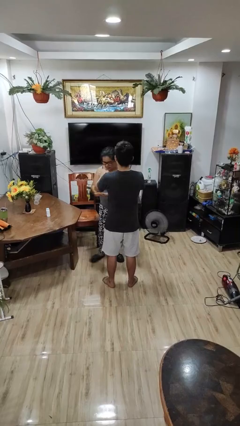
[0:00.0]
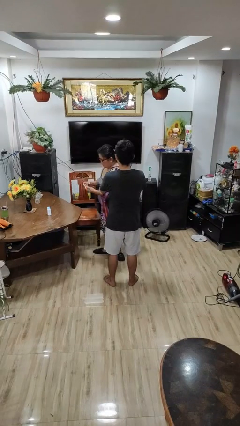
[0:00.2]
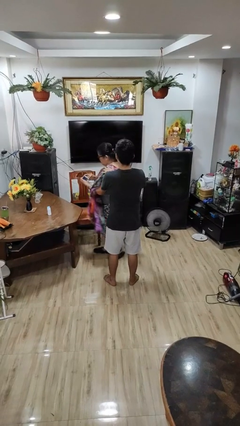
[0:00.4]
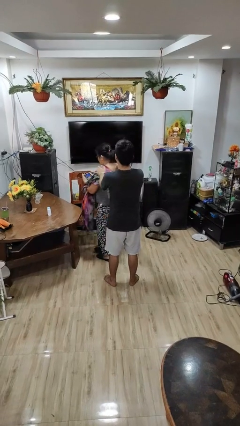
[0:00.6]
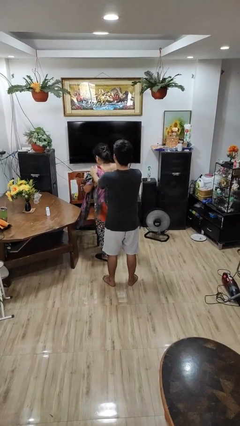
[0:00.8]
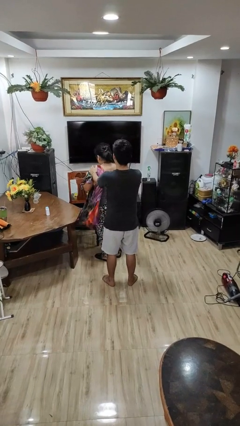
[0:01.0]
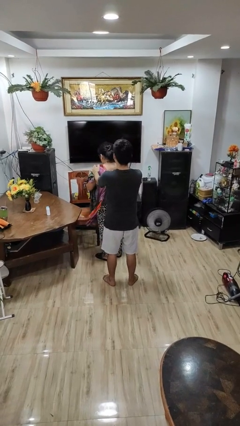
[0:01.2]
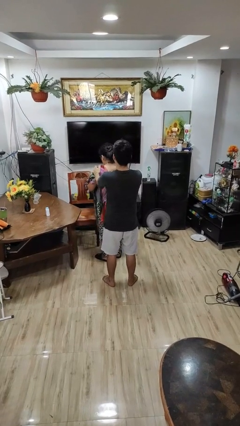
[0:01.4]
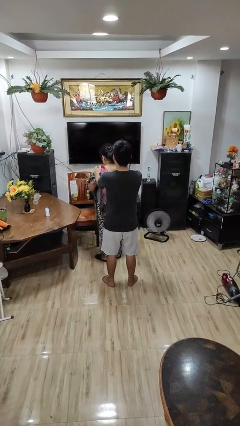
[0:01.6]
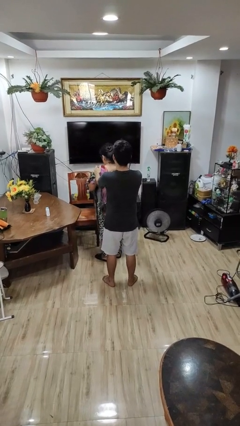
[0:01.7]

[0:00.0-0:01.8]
person spins person around

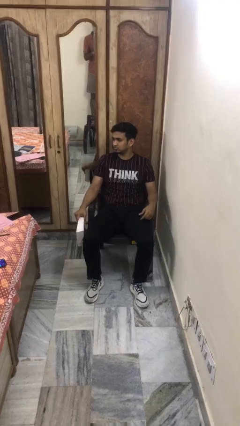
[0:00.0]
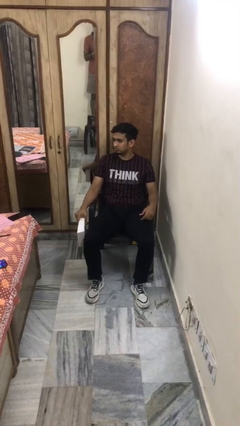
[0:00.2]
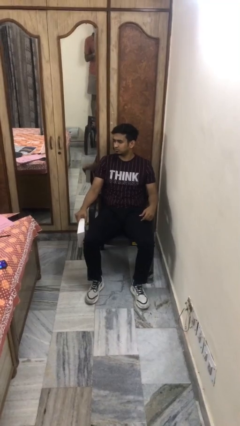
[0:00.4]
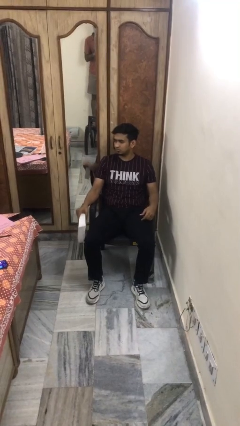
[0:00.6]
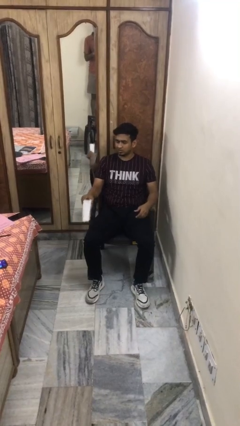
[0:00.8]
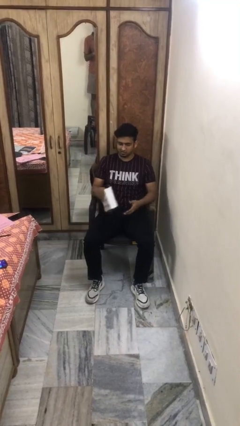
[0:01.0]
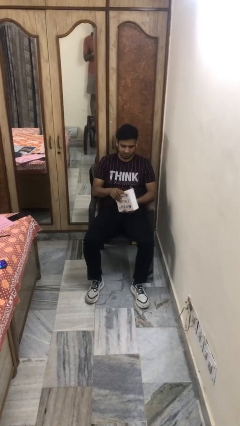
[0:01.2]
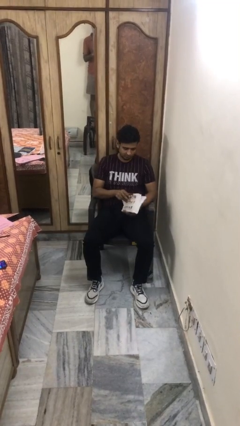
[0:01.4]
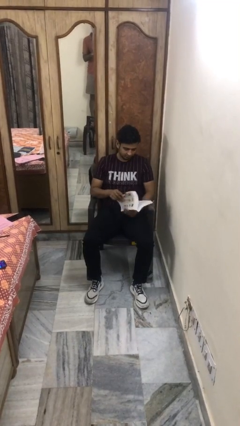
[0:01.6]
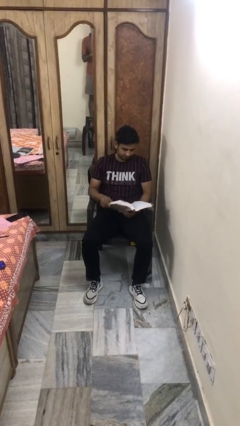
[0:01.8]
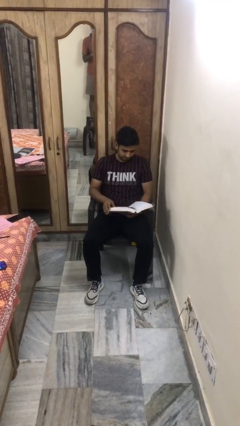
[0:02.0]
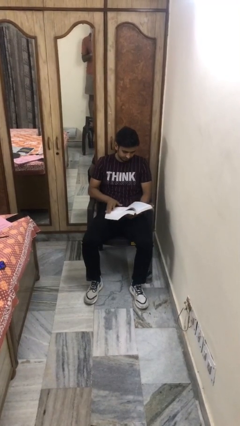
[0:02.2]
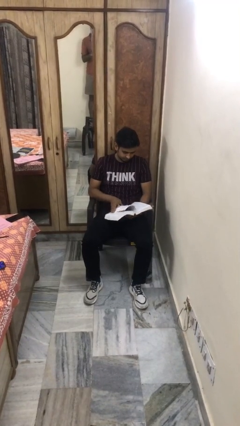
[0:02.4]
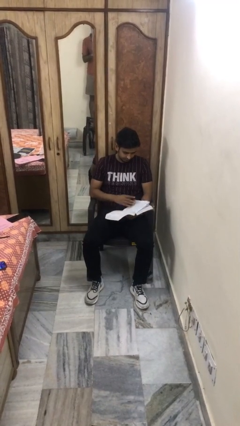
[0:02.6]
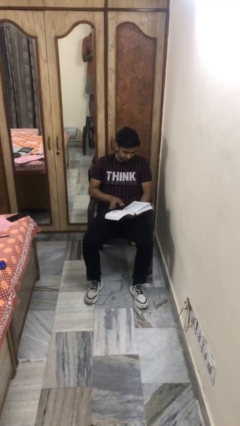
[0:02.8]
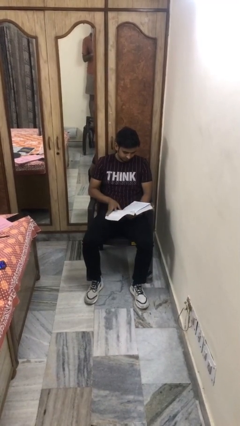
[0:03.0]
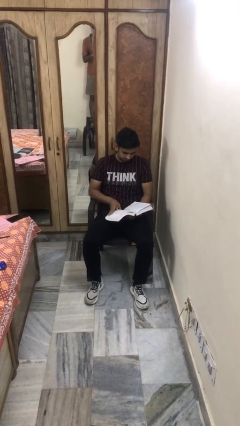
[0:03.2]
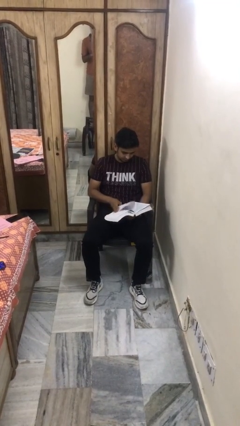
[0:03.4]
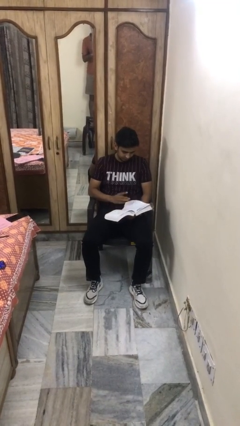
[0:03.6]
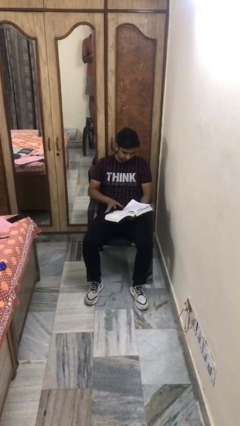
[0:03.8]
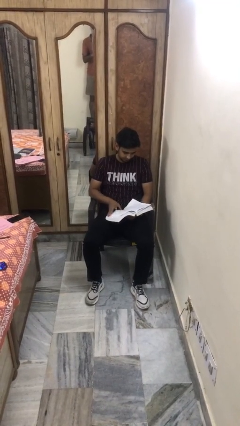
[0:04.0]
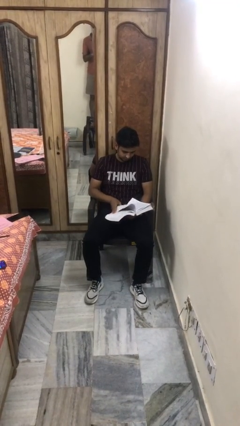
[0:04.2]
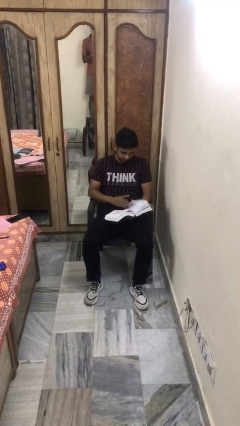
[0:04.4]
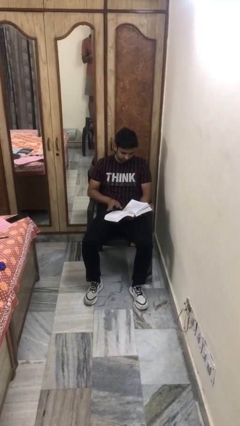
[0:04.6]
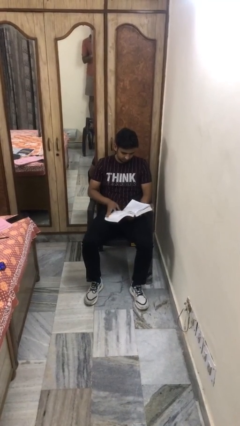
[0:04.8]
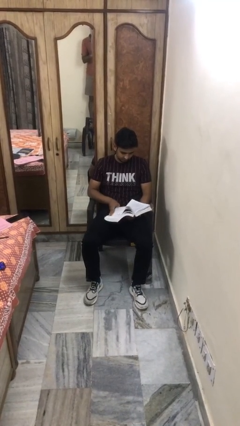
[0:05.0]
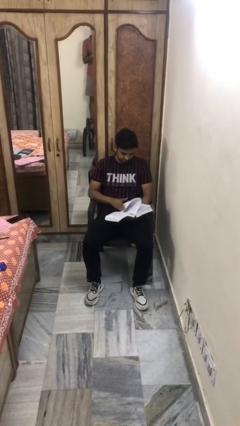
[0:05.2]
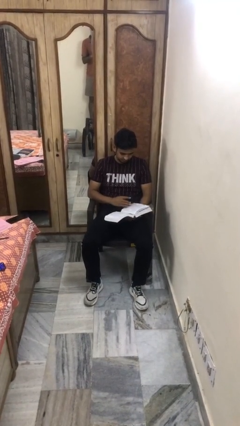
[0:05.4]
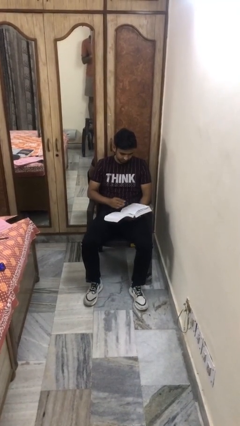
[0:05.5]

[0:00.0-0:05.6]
person reads book

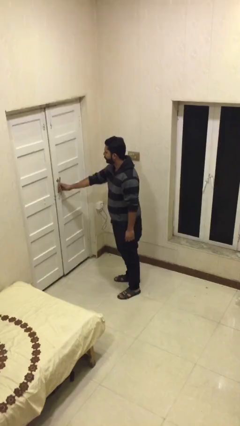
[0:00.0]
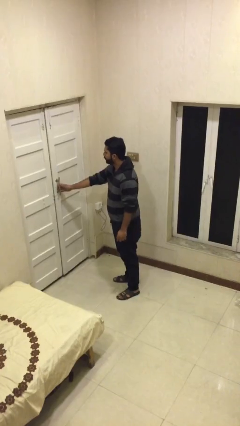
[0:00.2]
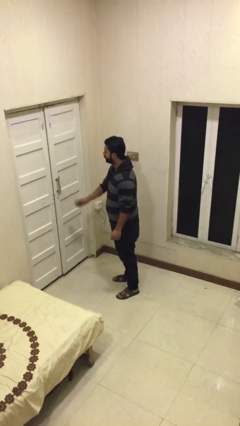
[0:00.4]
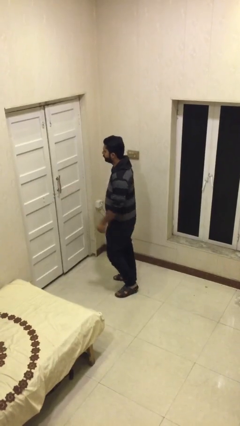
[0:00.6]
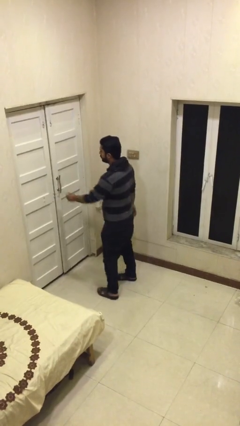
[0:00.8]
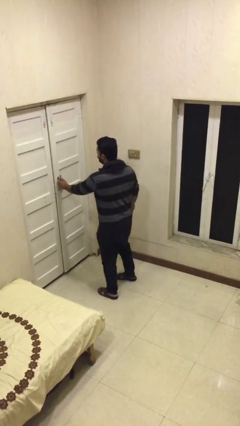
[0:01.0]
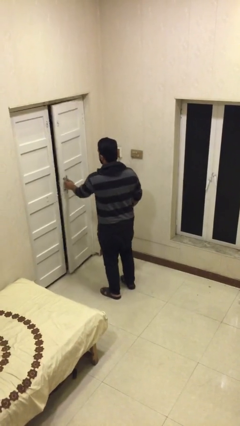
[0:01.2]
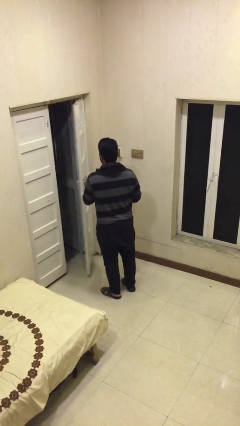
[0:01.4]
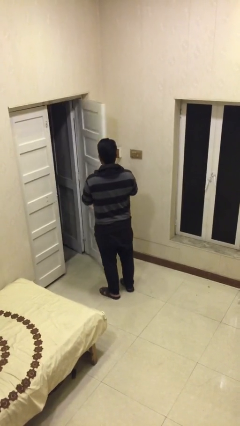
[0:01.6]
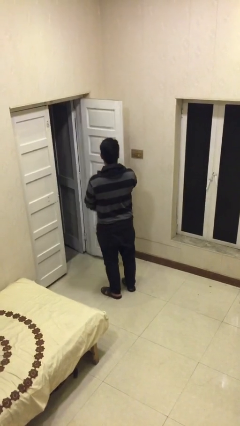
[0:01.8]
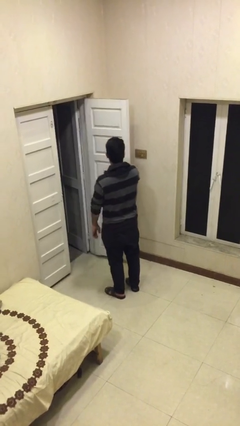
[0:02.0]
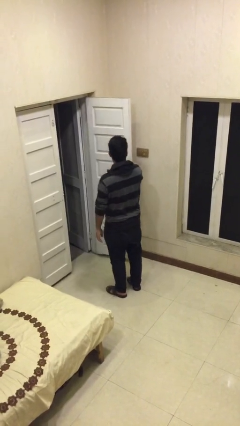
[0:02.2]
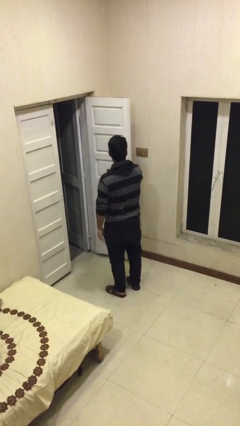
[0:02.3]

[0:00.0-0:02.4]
person opens facility door

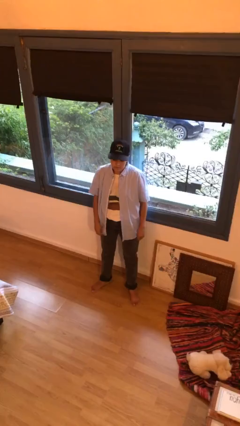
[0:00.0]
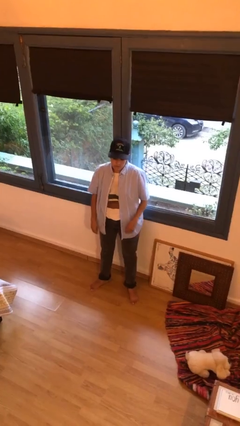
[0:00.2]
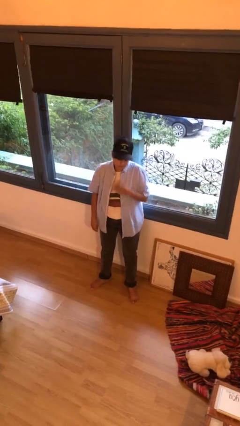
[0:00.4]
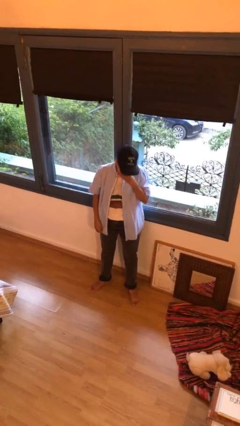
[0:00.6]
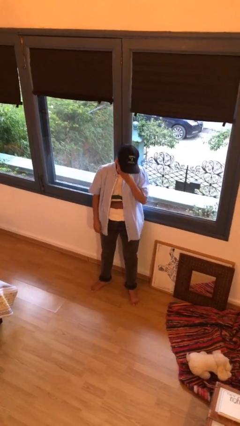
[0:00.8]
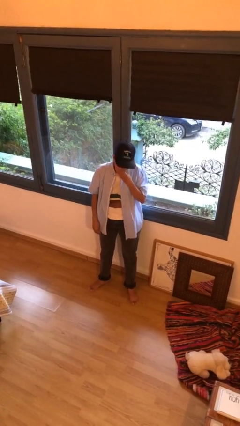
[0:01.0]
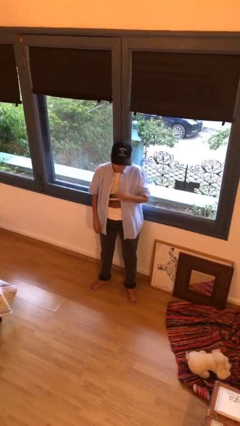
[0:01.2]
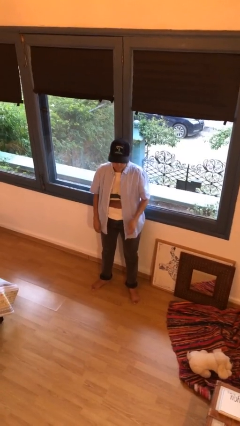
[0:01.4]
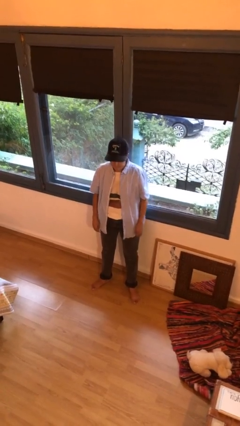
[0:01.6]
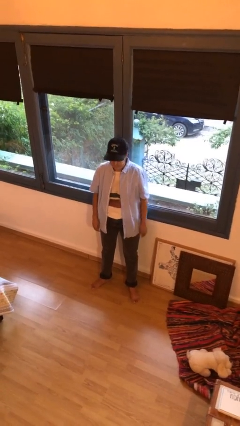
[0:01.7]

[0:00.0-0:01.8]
person sneezes into hand

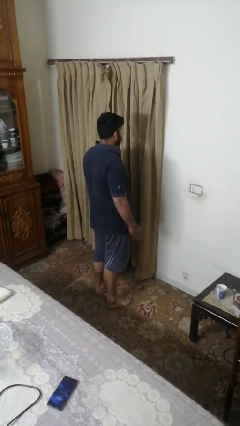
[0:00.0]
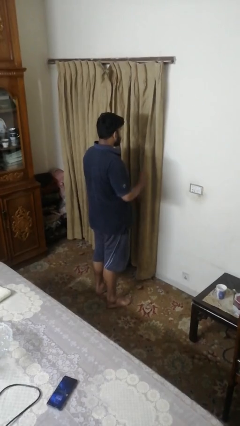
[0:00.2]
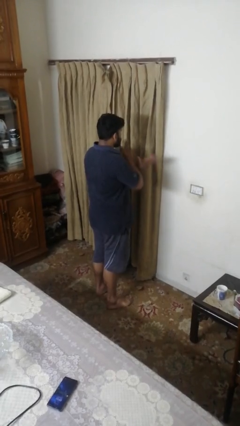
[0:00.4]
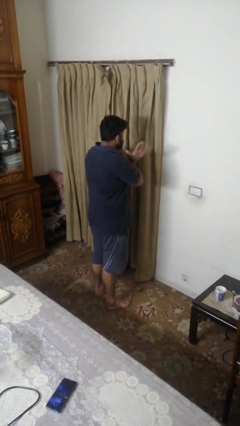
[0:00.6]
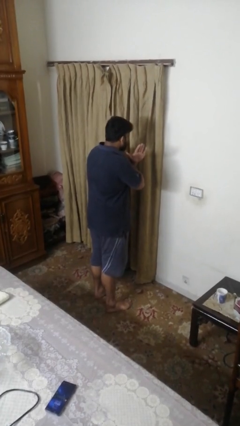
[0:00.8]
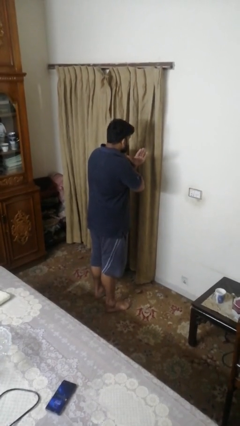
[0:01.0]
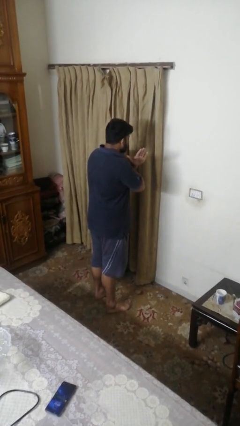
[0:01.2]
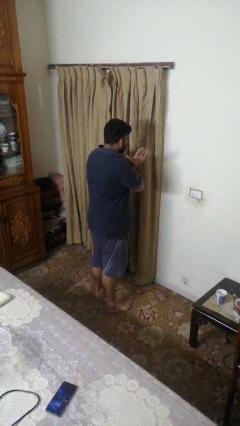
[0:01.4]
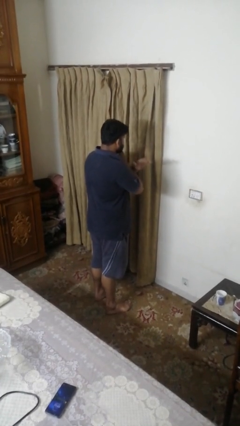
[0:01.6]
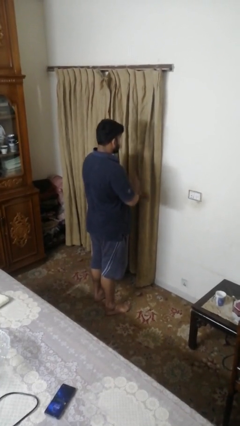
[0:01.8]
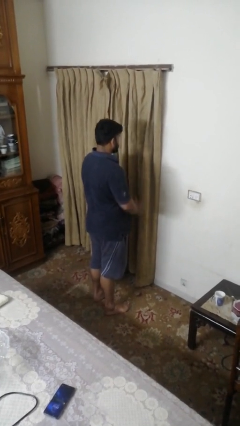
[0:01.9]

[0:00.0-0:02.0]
person gestures arms x

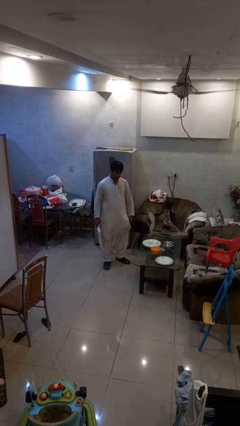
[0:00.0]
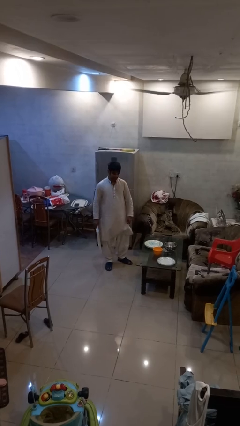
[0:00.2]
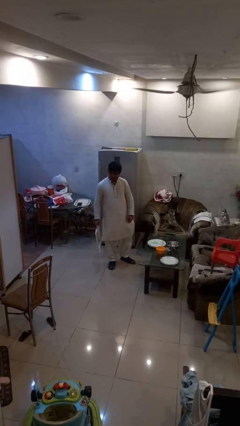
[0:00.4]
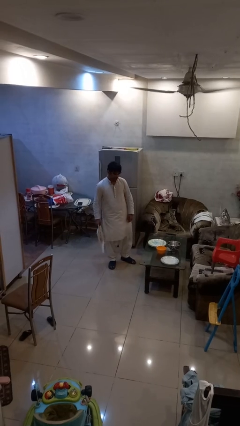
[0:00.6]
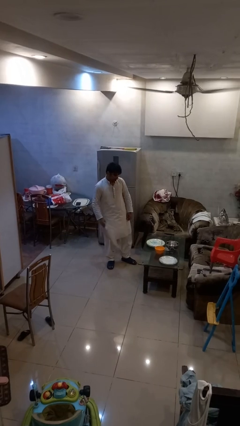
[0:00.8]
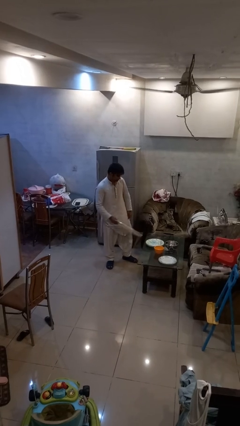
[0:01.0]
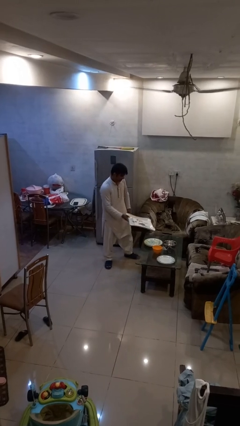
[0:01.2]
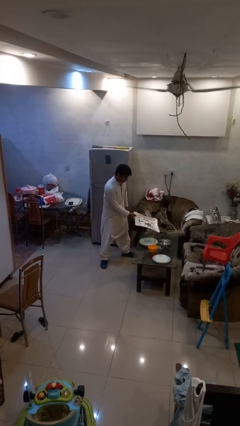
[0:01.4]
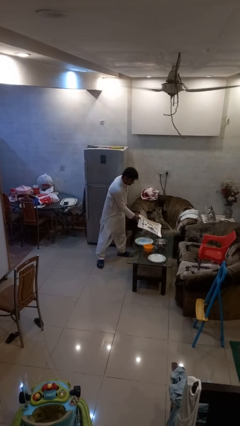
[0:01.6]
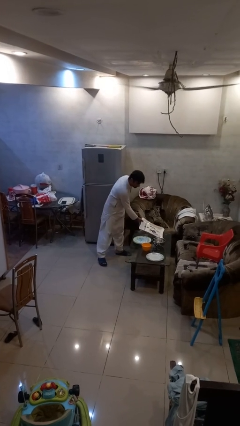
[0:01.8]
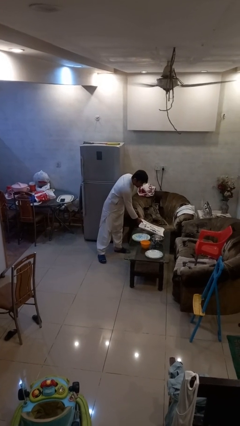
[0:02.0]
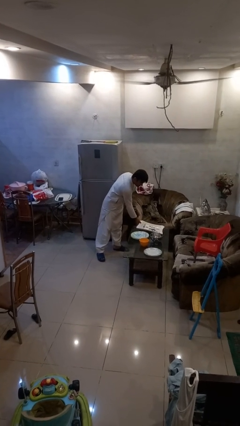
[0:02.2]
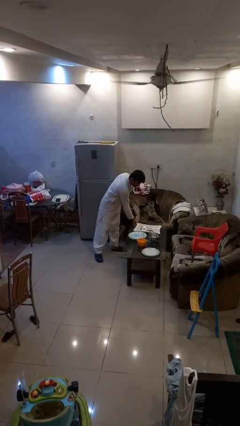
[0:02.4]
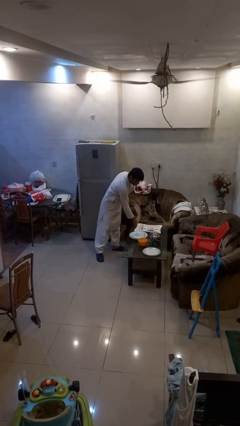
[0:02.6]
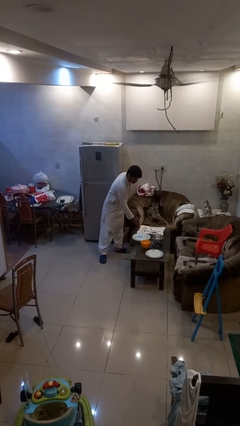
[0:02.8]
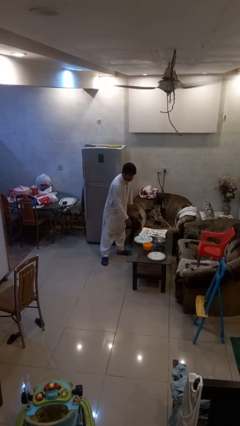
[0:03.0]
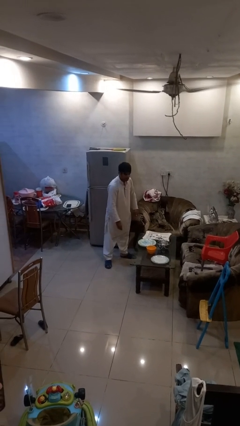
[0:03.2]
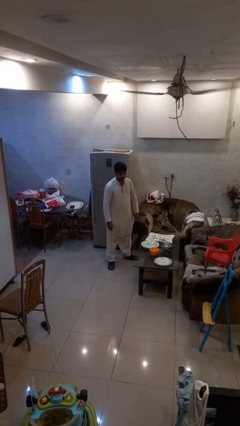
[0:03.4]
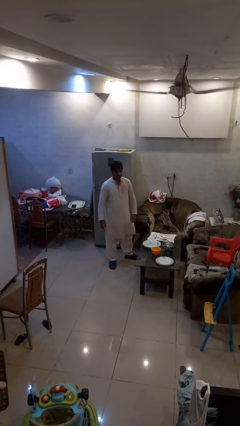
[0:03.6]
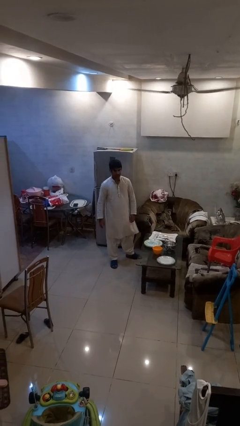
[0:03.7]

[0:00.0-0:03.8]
person sets table

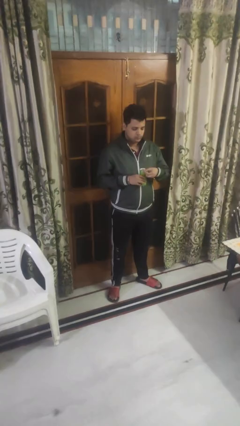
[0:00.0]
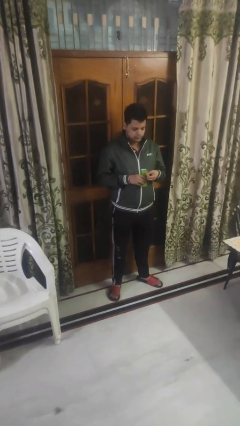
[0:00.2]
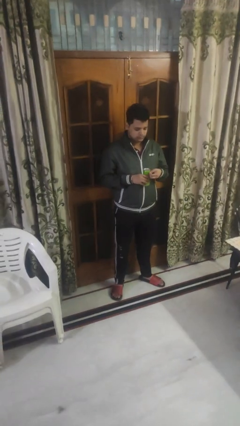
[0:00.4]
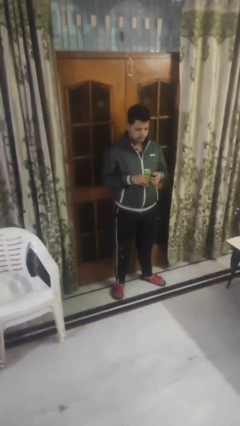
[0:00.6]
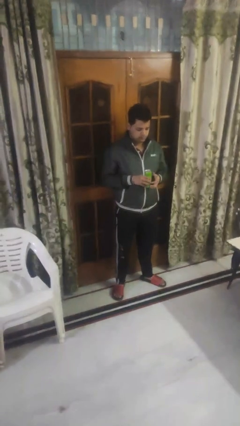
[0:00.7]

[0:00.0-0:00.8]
person opens beverage can
